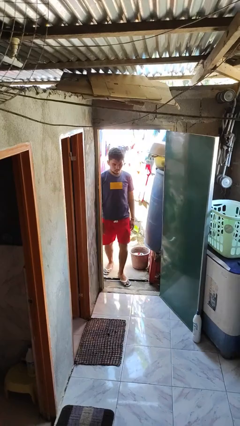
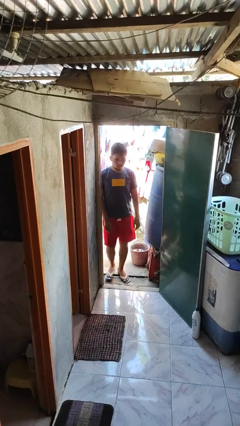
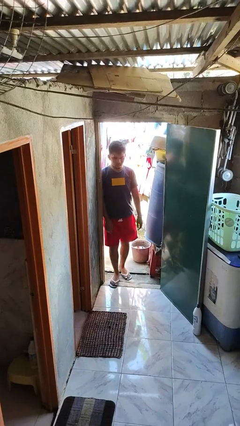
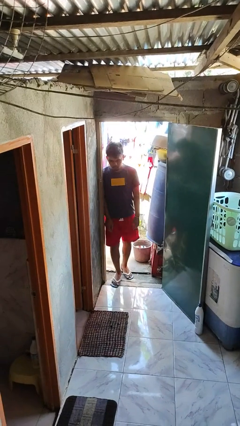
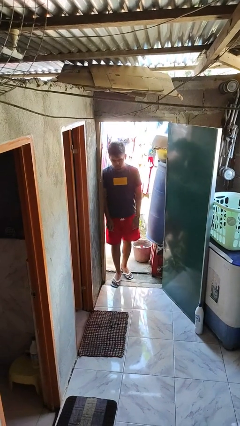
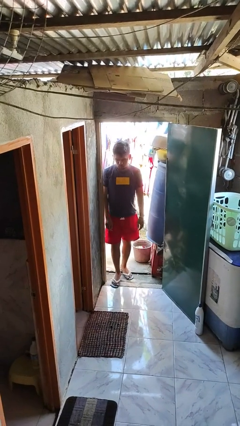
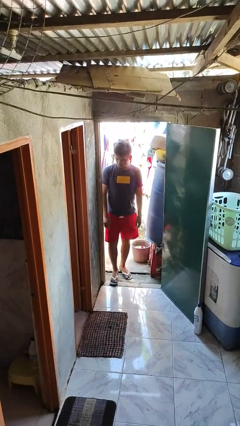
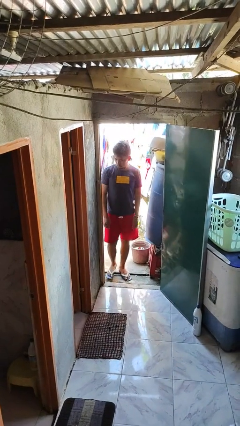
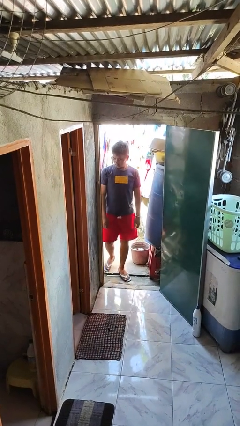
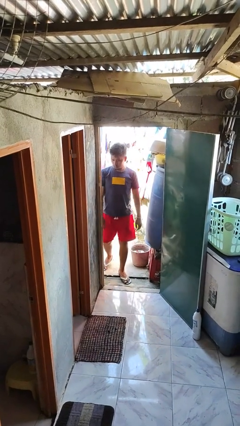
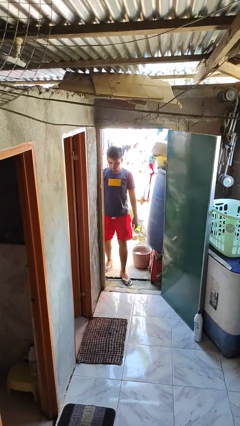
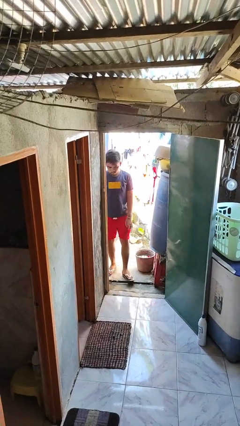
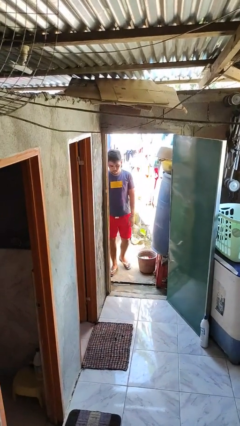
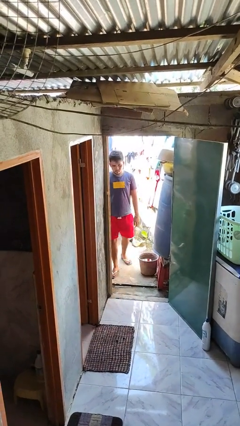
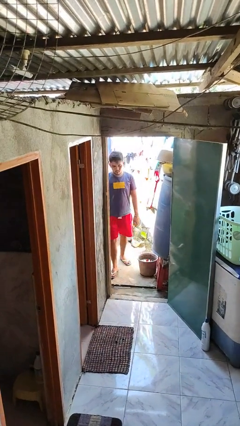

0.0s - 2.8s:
person bumps into wall

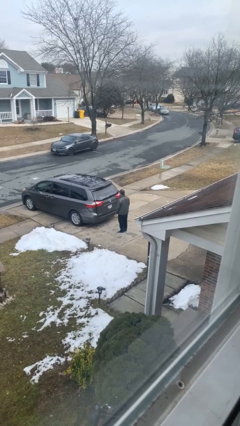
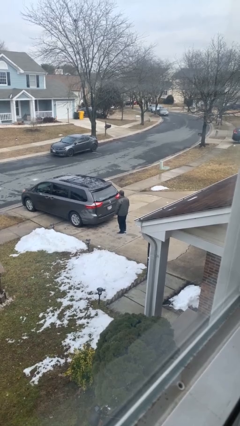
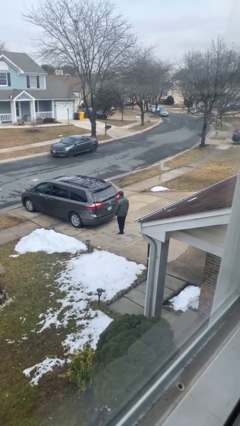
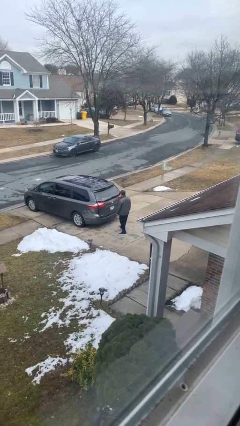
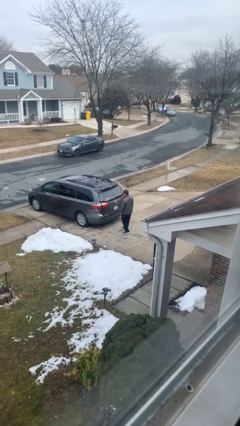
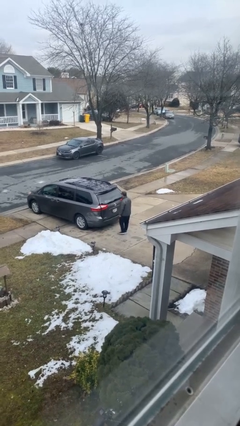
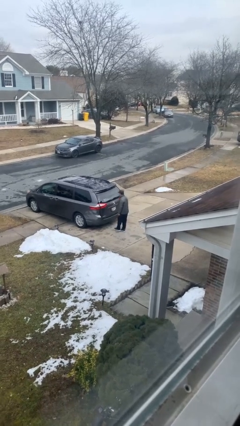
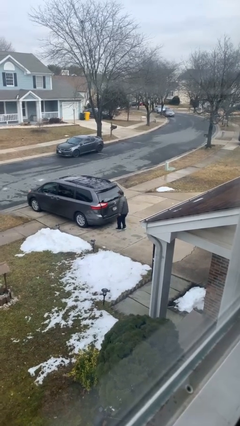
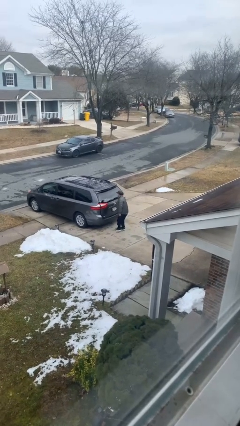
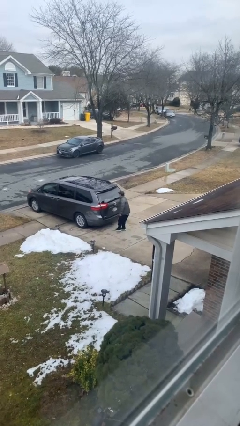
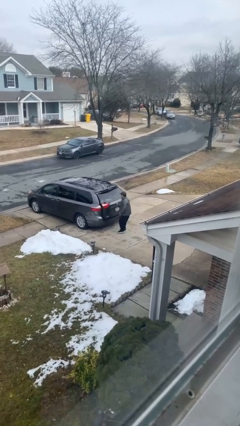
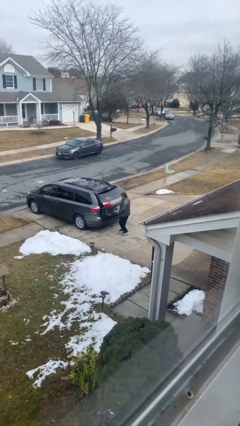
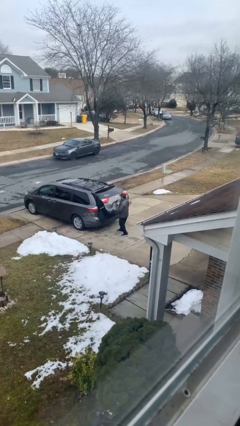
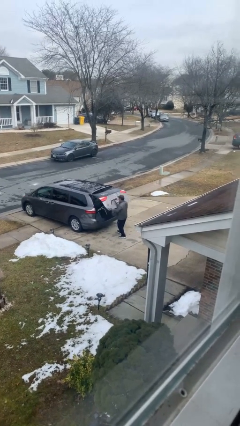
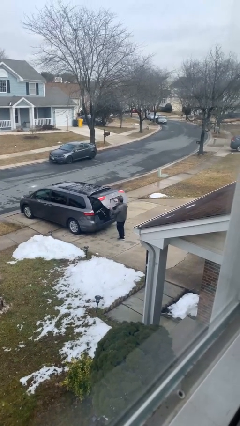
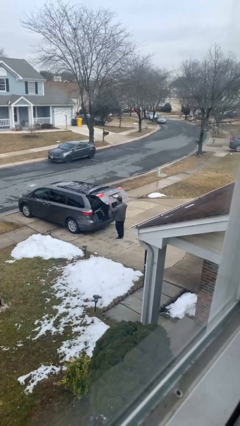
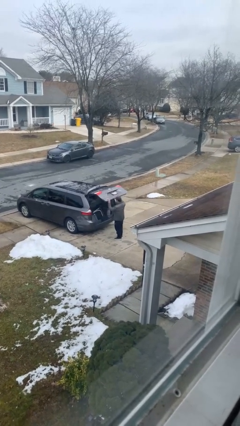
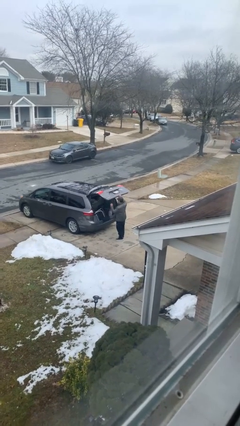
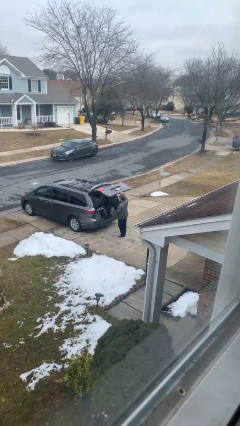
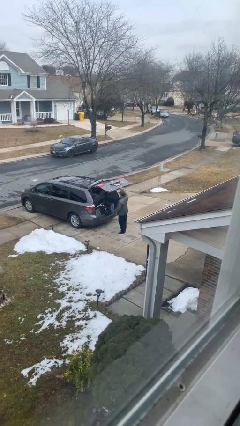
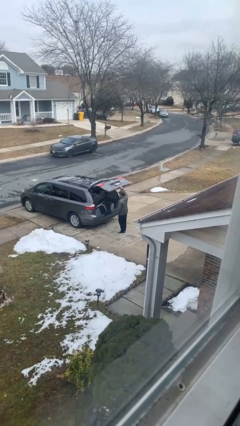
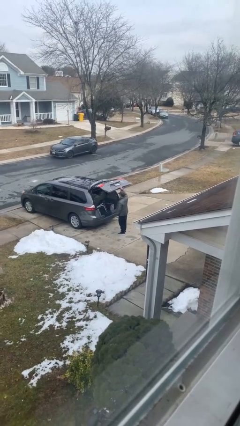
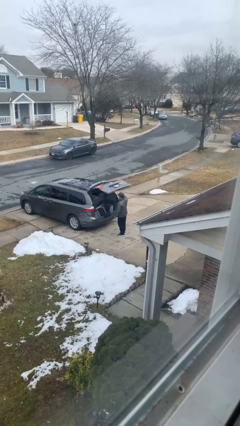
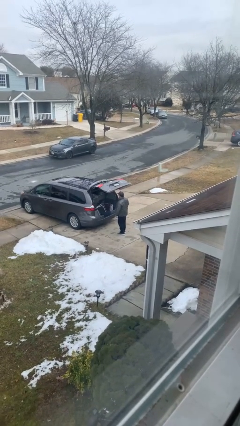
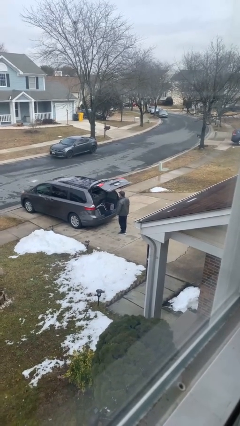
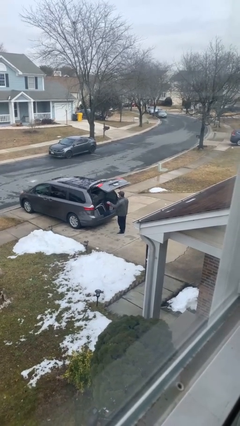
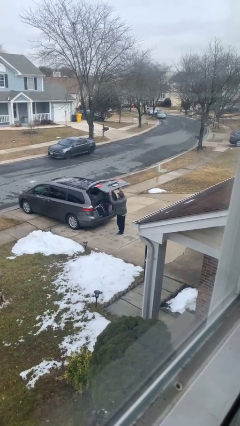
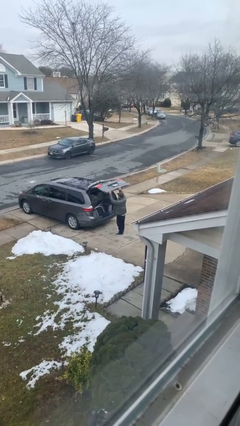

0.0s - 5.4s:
person opens car trunk

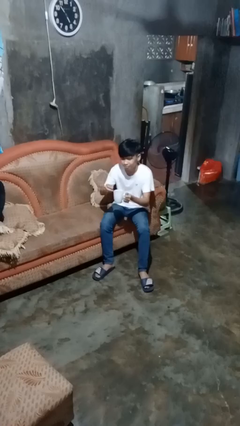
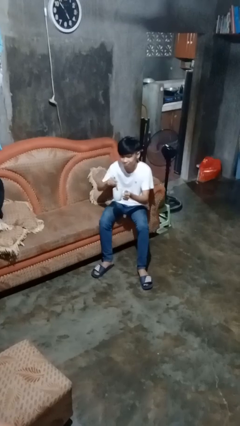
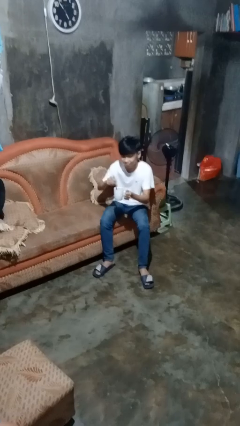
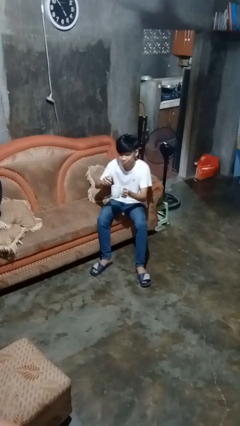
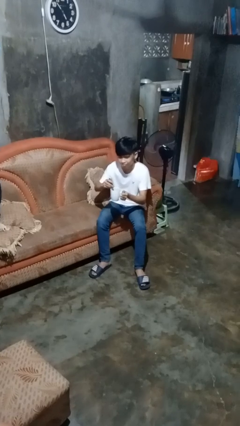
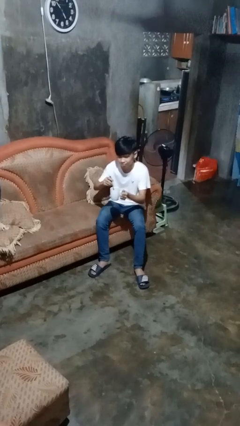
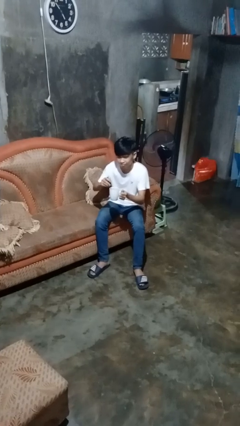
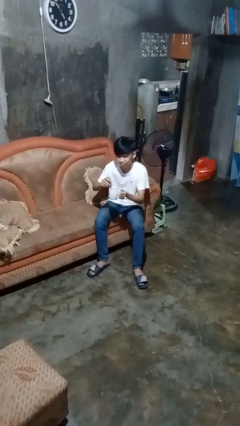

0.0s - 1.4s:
person stirs mug

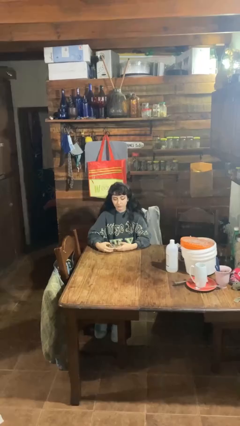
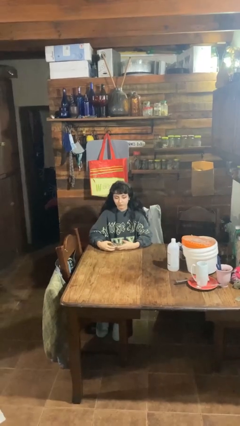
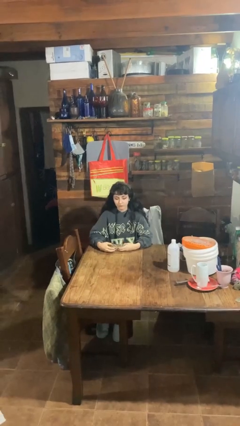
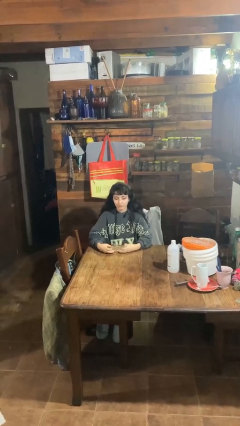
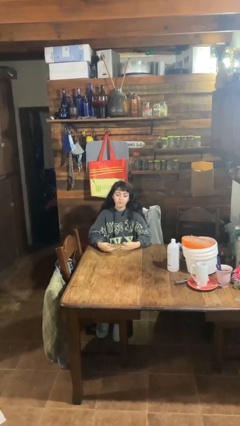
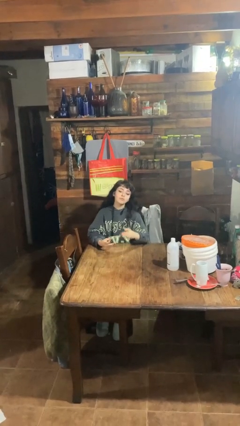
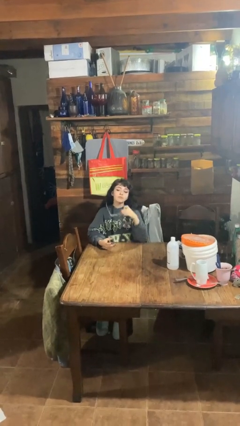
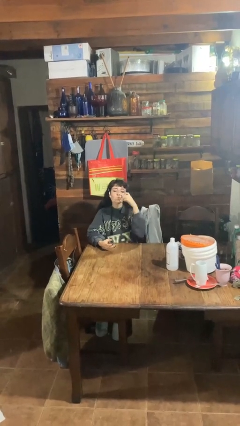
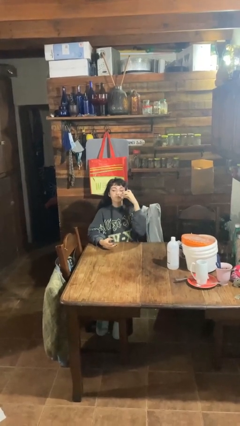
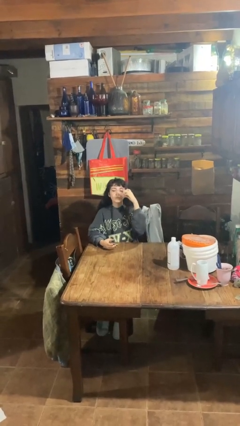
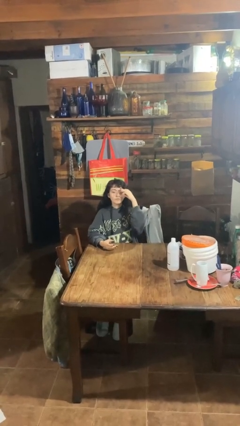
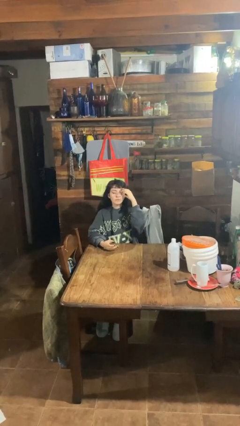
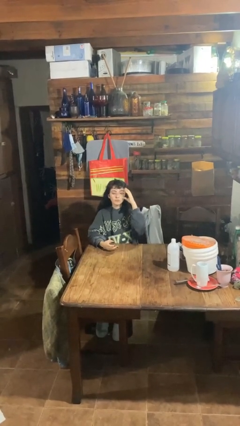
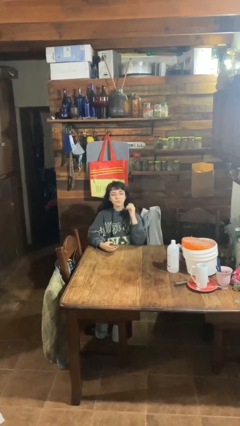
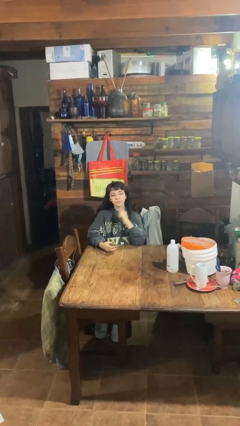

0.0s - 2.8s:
person puts on glasses

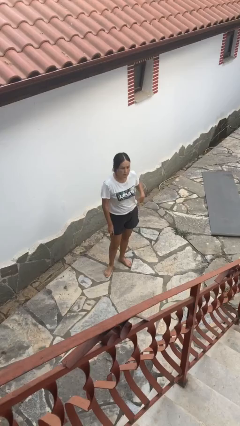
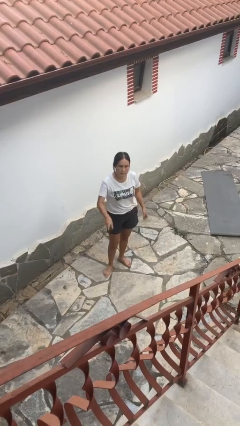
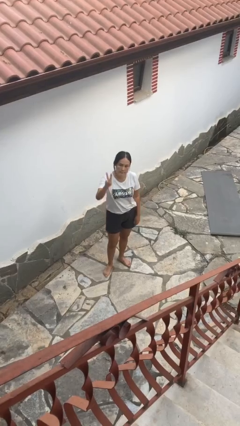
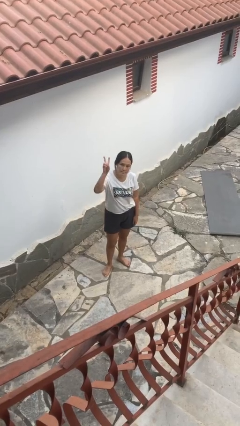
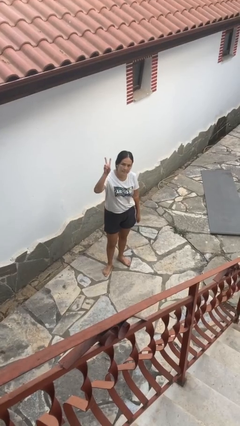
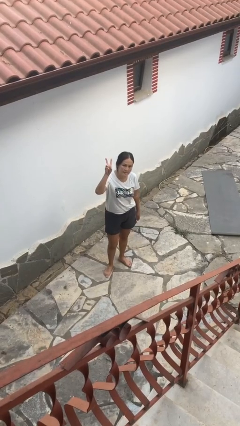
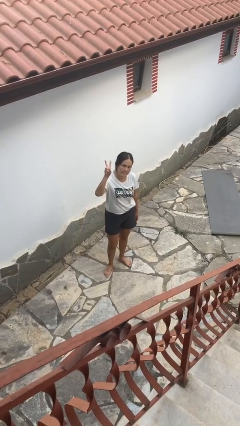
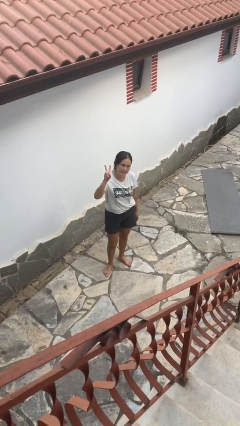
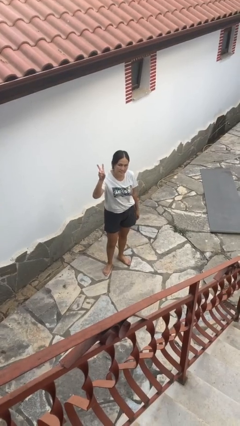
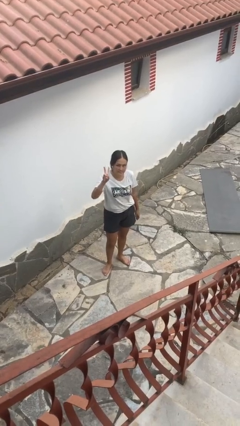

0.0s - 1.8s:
person gestures peace

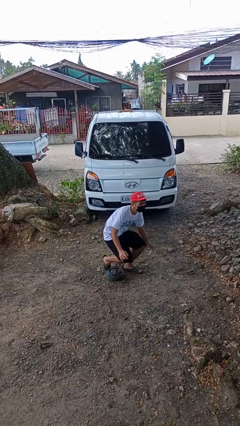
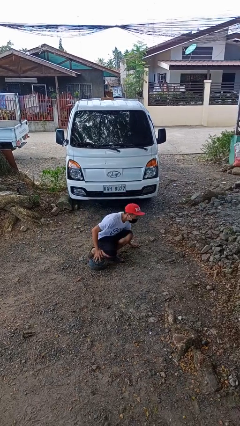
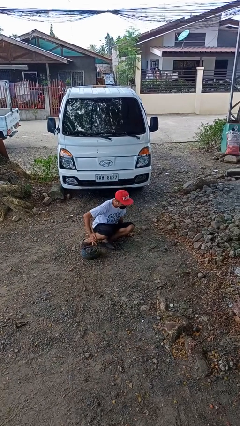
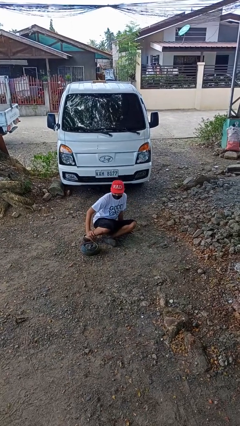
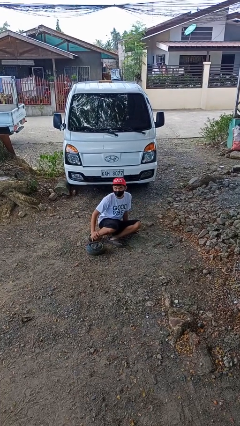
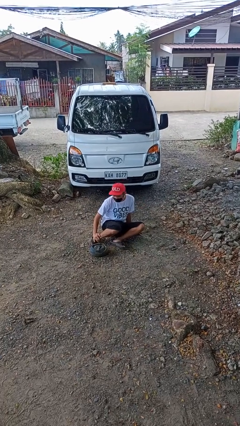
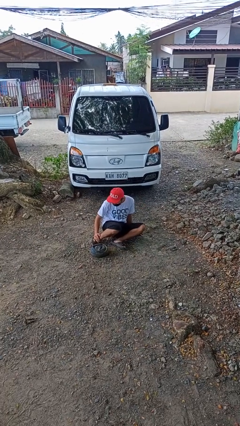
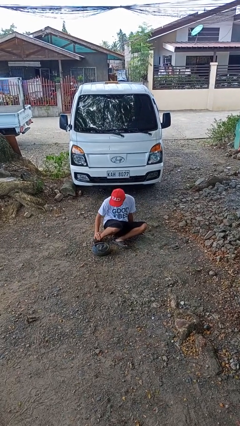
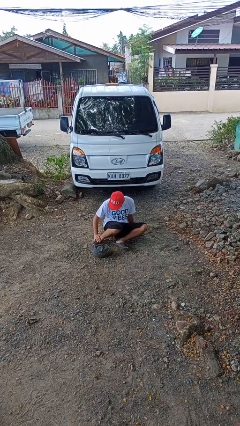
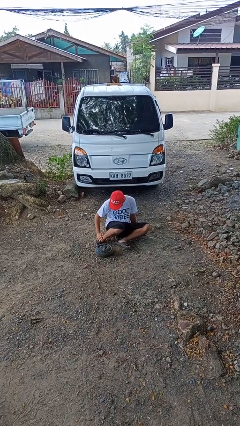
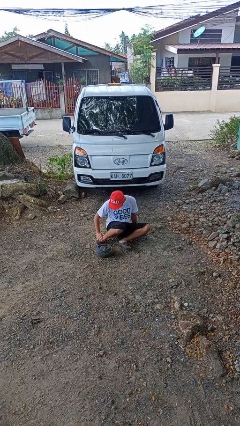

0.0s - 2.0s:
person lies down on floor

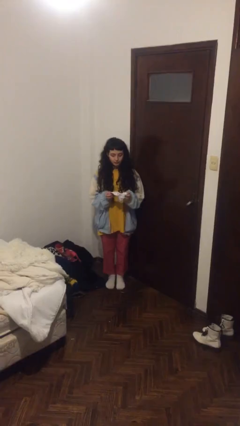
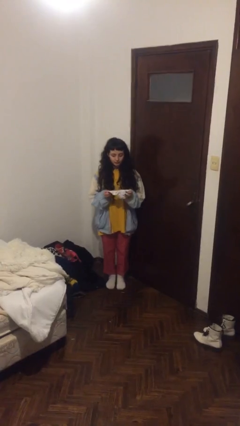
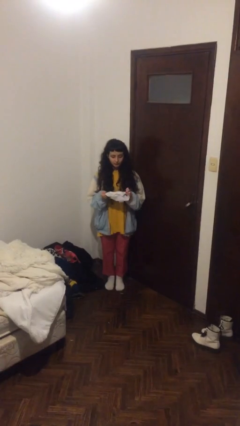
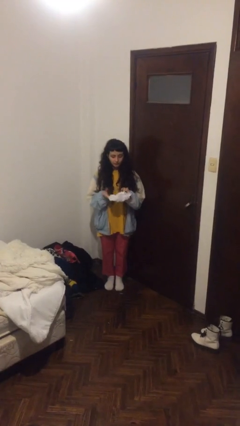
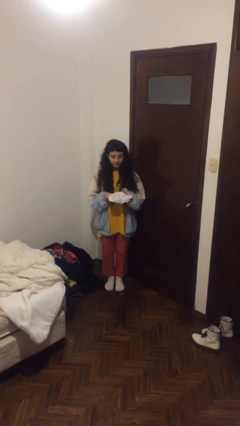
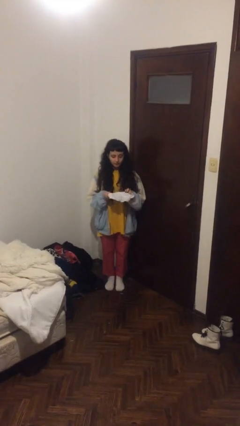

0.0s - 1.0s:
person crumples paper
